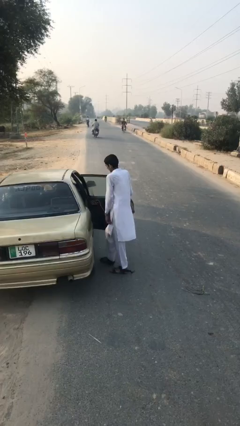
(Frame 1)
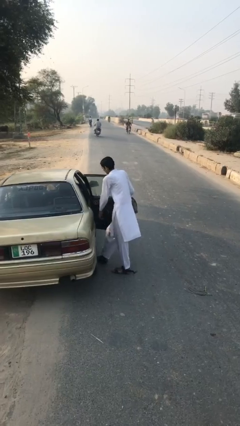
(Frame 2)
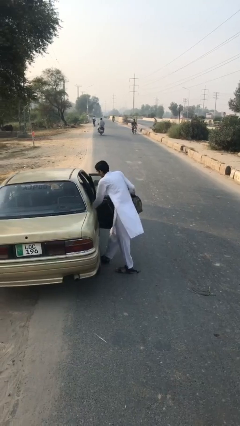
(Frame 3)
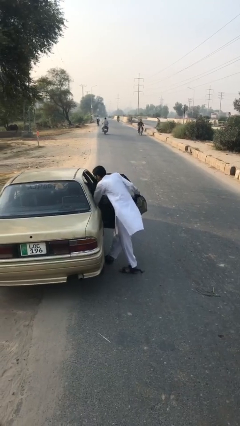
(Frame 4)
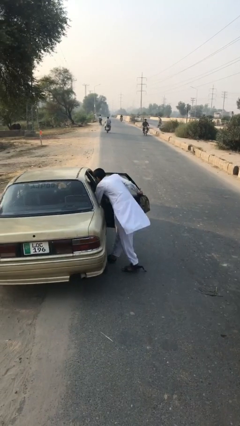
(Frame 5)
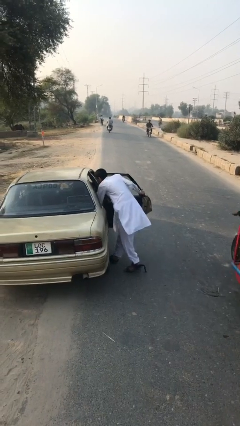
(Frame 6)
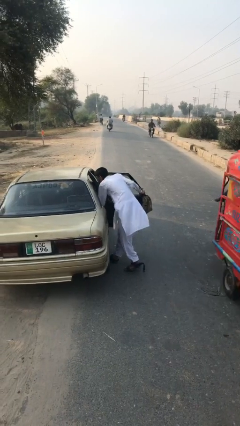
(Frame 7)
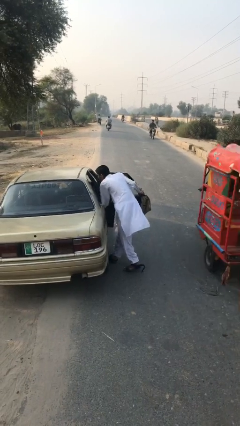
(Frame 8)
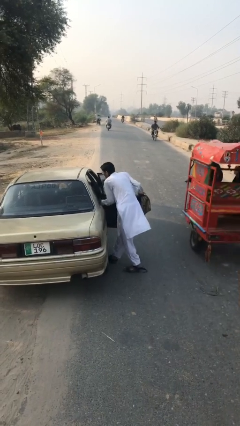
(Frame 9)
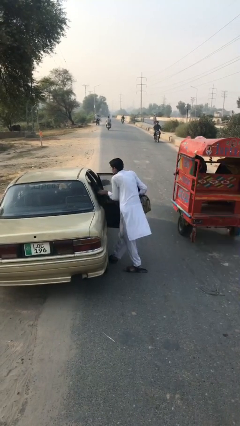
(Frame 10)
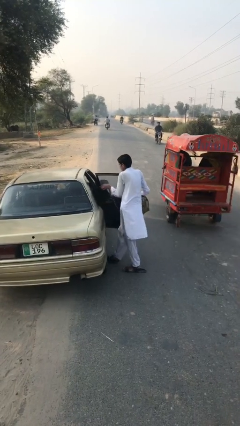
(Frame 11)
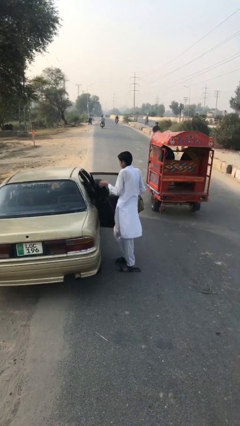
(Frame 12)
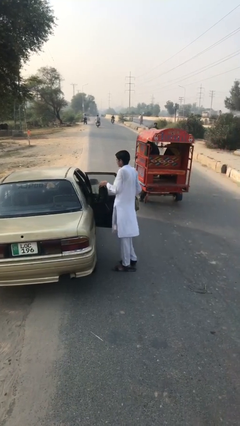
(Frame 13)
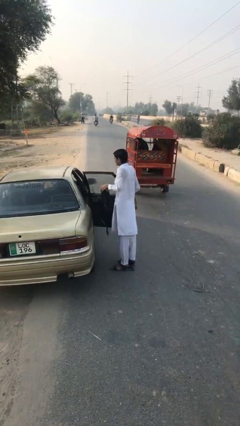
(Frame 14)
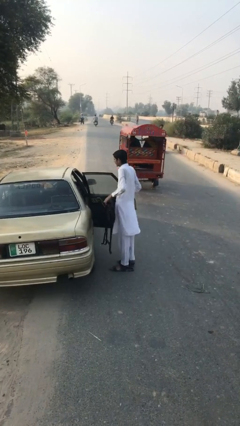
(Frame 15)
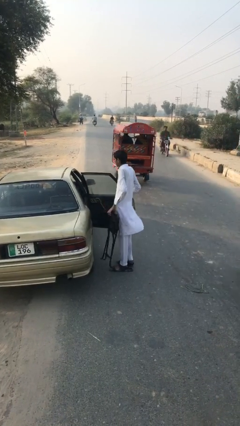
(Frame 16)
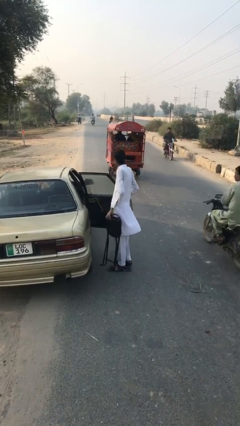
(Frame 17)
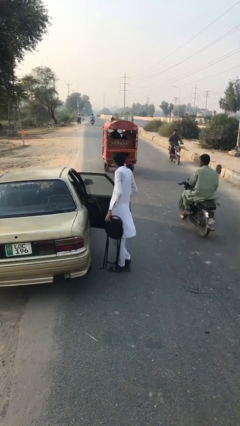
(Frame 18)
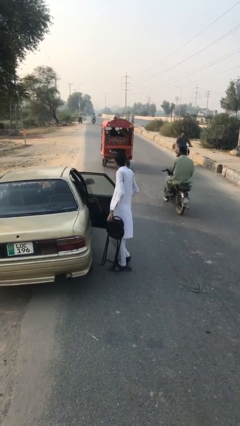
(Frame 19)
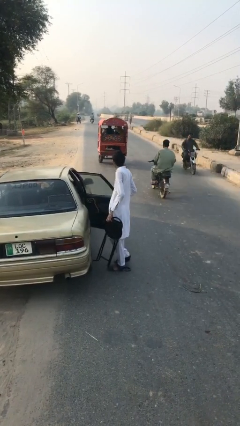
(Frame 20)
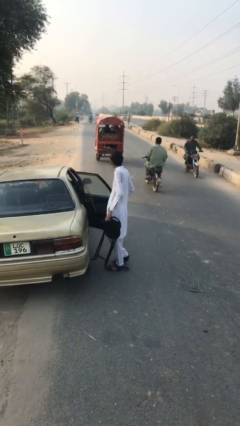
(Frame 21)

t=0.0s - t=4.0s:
person unloads car

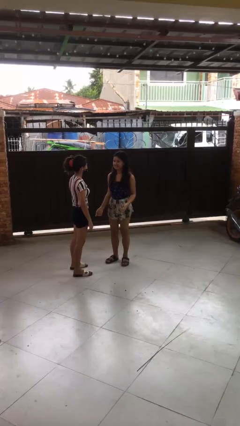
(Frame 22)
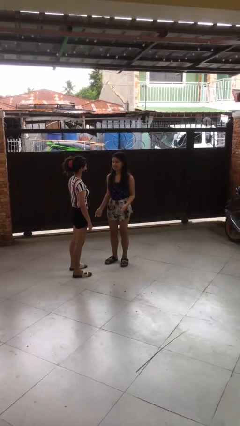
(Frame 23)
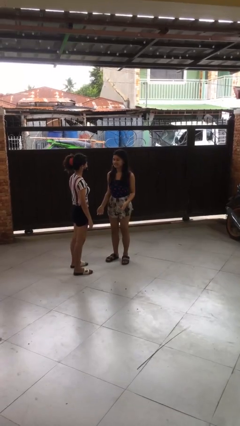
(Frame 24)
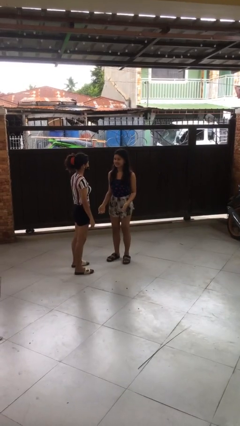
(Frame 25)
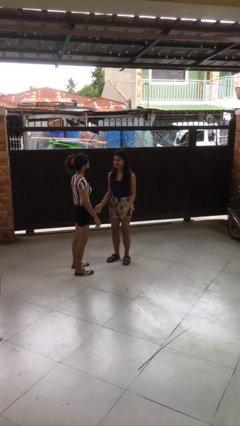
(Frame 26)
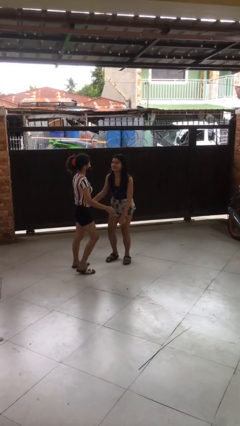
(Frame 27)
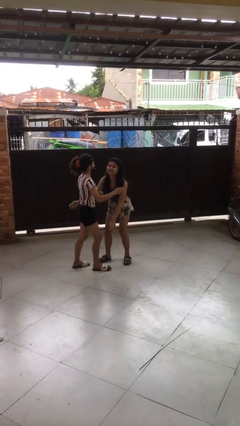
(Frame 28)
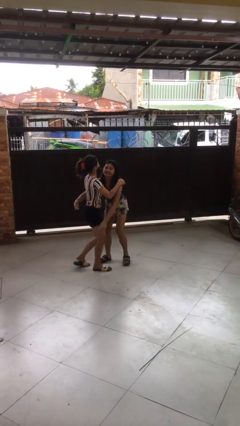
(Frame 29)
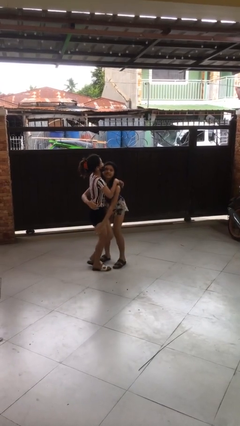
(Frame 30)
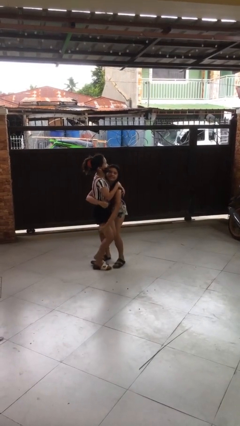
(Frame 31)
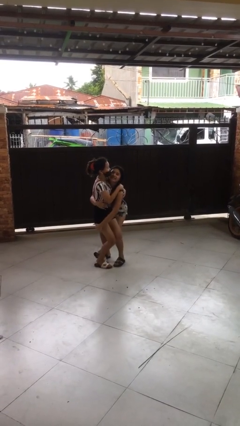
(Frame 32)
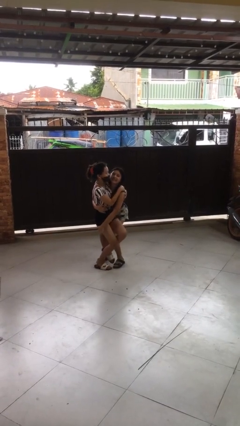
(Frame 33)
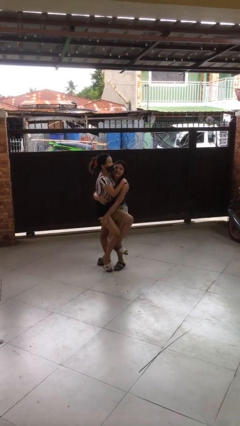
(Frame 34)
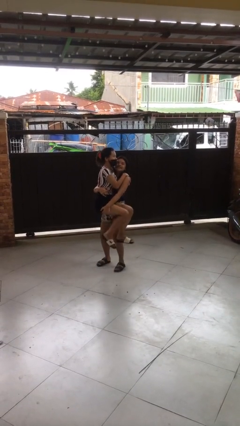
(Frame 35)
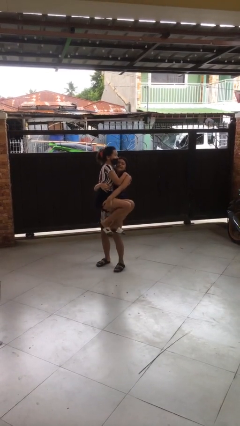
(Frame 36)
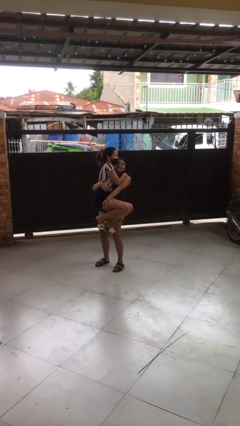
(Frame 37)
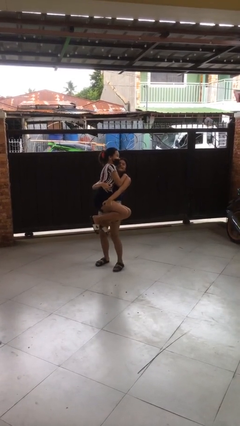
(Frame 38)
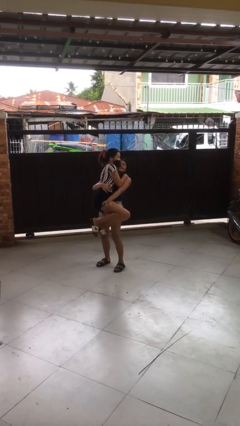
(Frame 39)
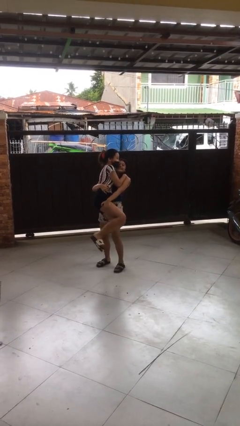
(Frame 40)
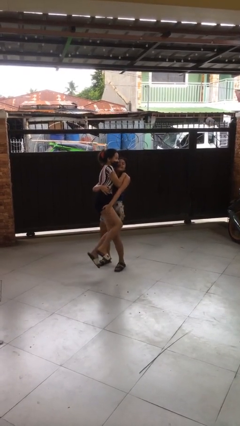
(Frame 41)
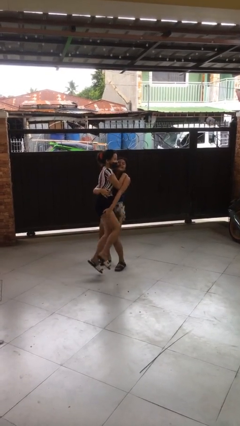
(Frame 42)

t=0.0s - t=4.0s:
person picks up person

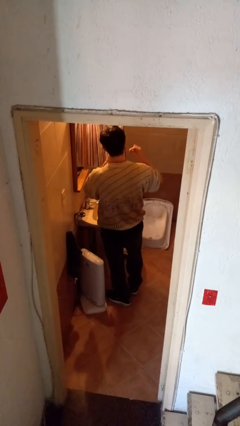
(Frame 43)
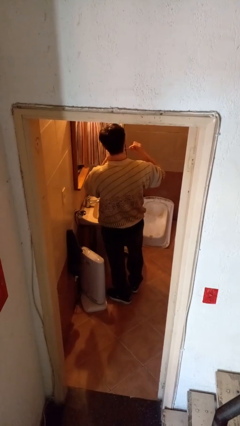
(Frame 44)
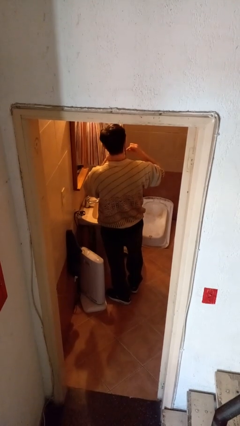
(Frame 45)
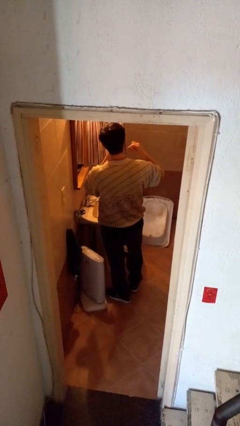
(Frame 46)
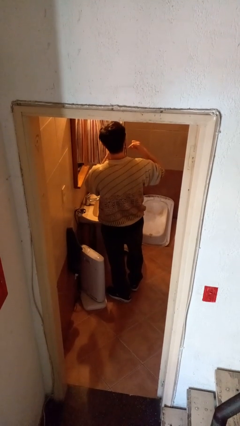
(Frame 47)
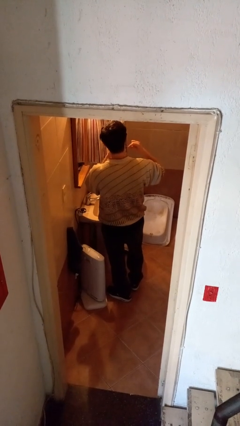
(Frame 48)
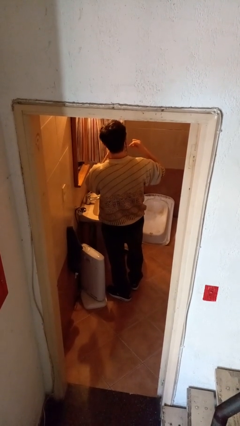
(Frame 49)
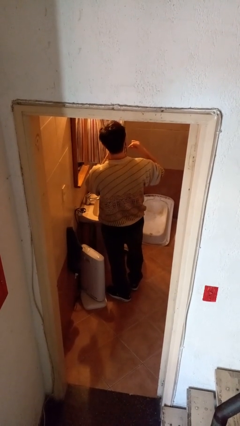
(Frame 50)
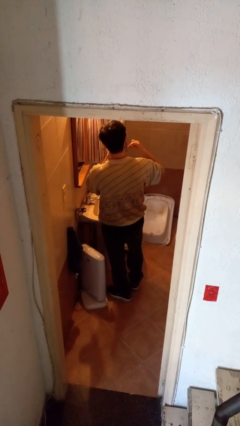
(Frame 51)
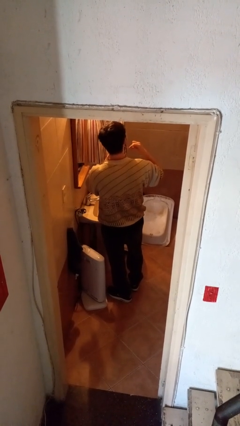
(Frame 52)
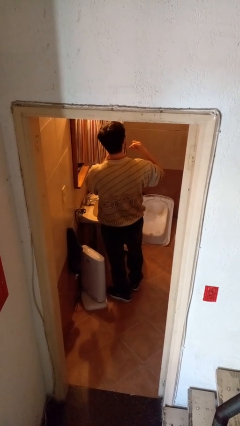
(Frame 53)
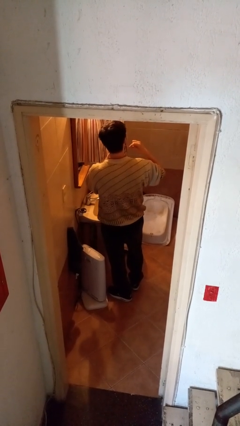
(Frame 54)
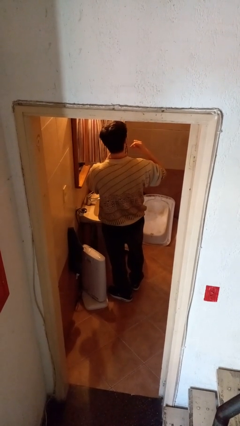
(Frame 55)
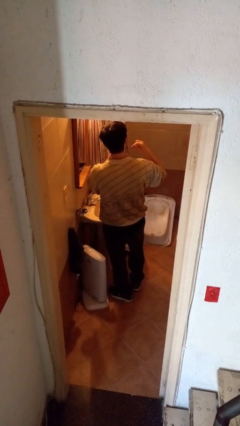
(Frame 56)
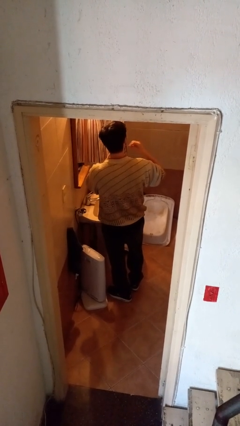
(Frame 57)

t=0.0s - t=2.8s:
person flosses

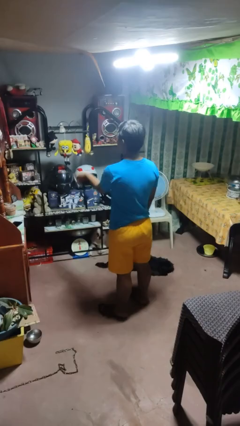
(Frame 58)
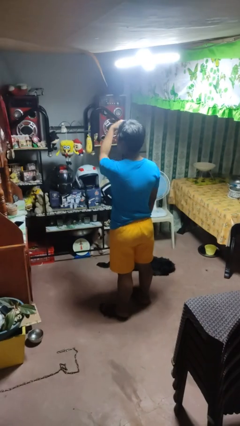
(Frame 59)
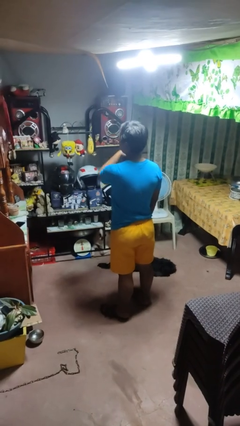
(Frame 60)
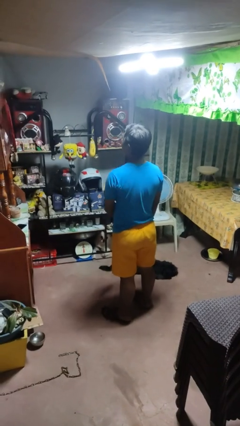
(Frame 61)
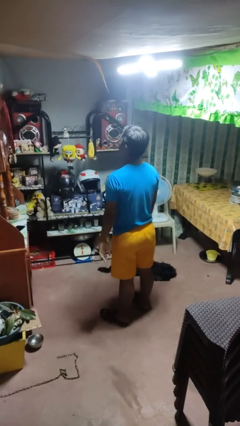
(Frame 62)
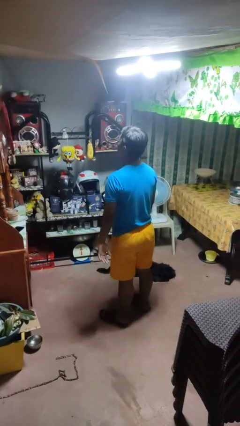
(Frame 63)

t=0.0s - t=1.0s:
person gestures swipe up

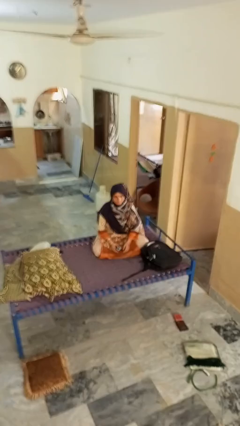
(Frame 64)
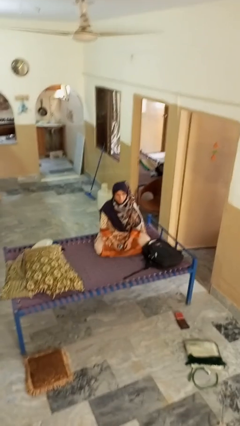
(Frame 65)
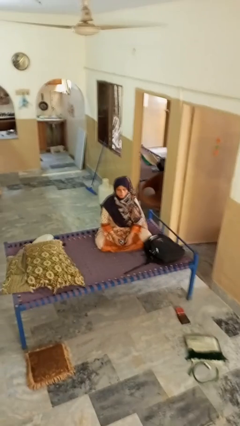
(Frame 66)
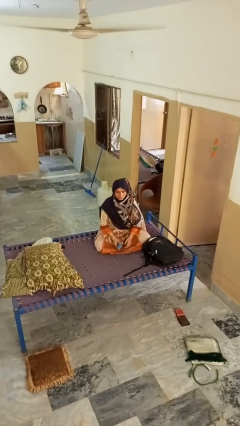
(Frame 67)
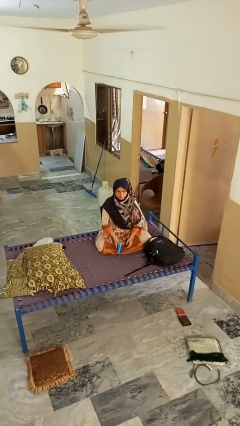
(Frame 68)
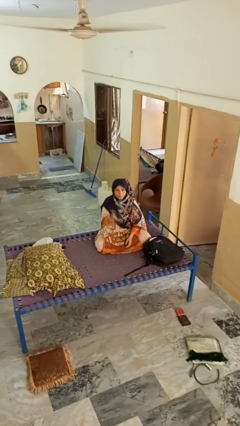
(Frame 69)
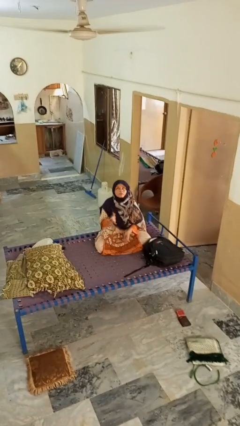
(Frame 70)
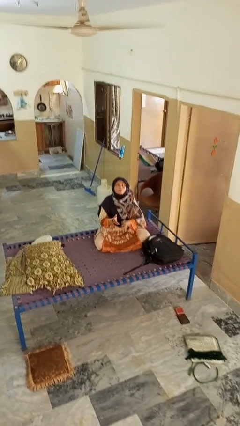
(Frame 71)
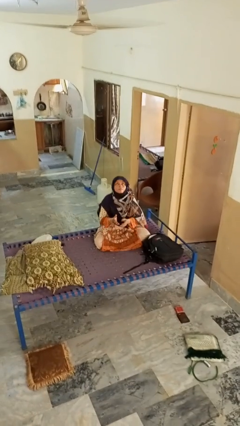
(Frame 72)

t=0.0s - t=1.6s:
person drops object

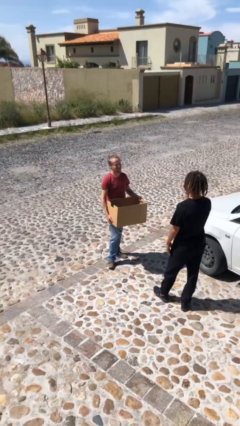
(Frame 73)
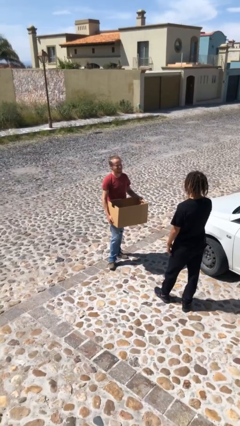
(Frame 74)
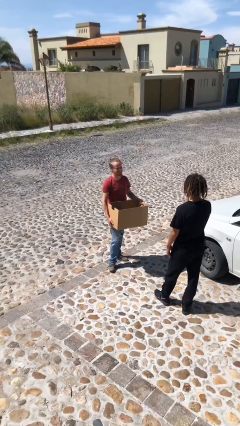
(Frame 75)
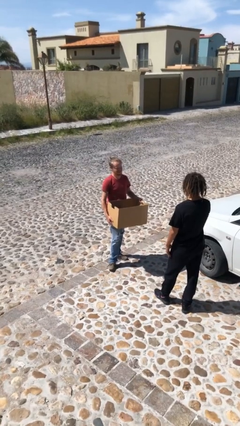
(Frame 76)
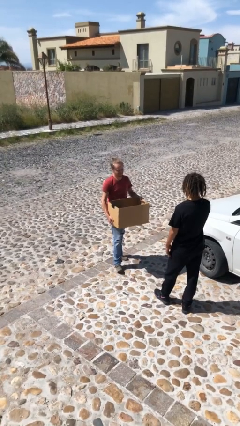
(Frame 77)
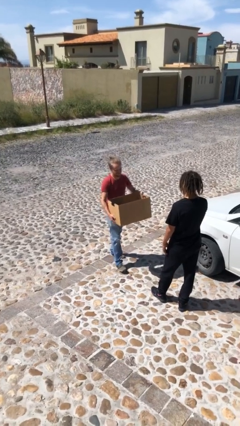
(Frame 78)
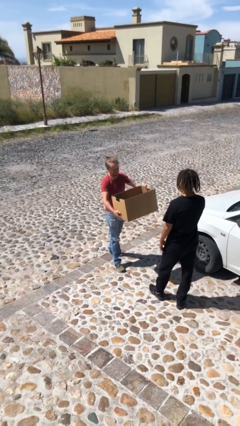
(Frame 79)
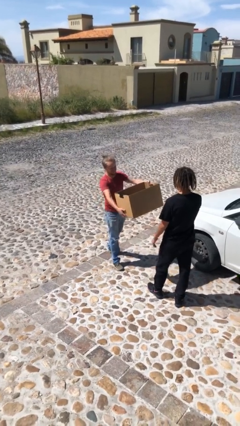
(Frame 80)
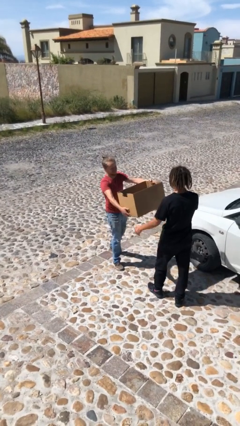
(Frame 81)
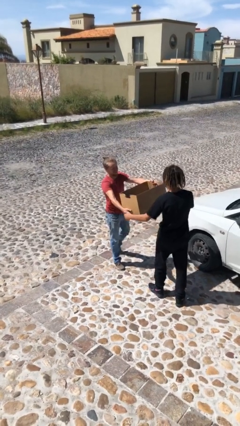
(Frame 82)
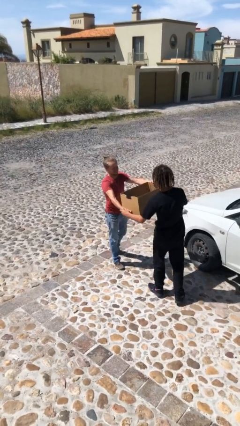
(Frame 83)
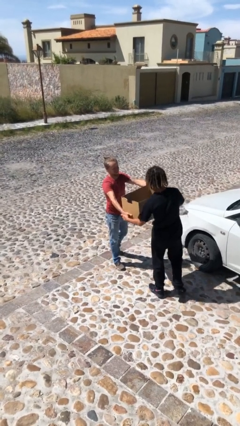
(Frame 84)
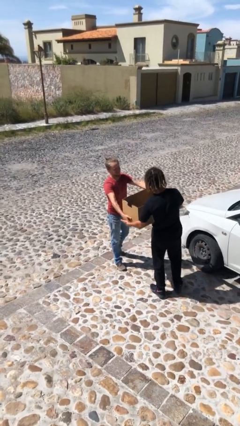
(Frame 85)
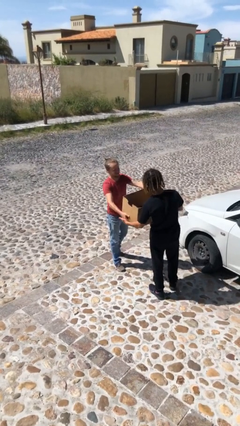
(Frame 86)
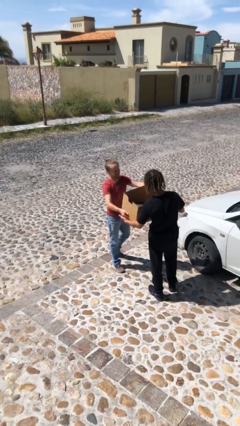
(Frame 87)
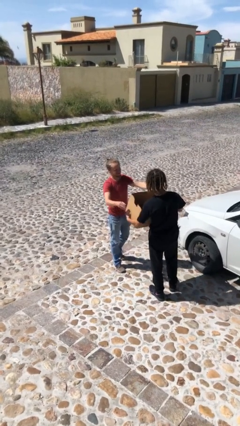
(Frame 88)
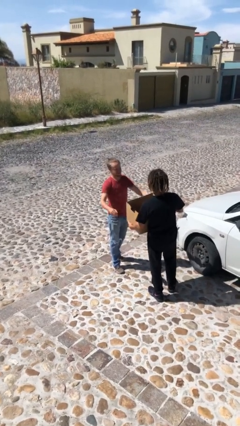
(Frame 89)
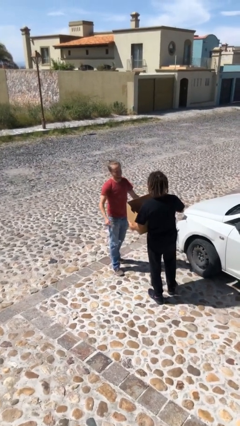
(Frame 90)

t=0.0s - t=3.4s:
person transfers object to person

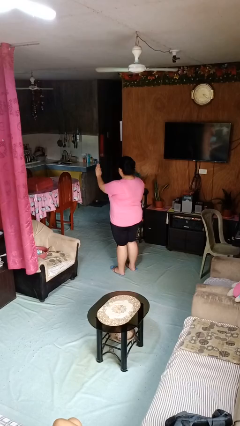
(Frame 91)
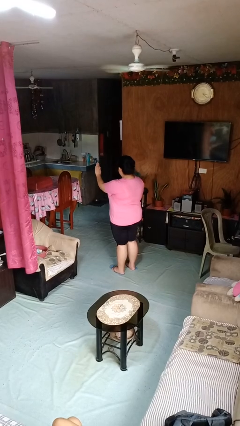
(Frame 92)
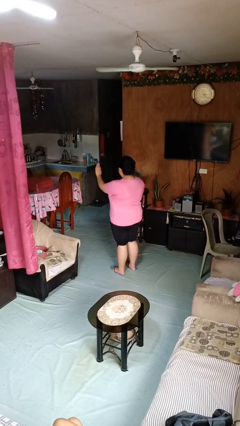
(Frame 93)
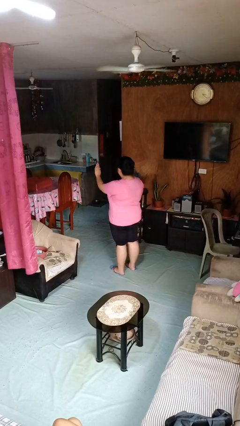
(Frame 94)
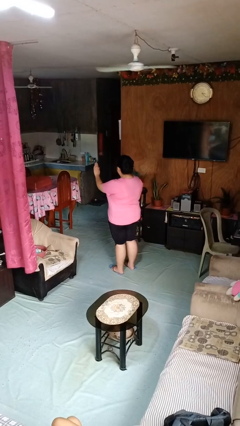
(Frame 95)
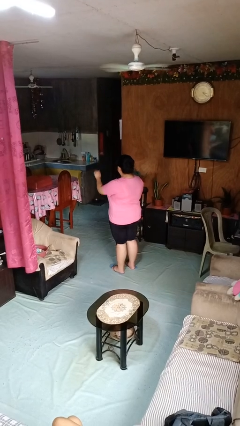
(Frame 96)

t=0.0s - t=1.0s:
person gestures stop
